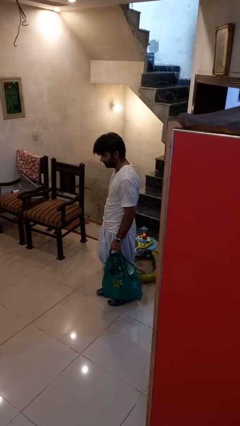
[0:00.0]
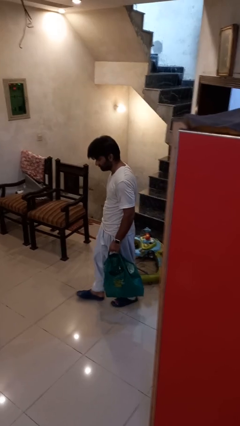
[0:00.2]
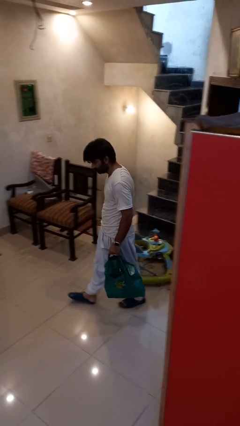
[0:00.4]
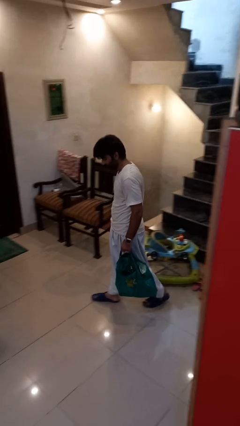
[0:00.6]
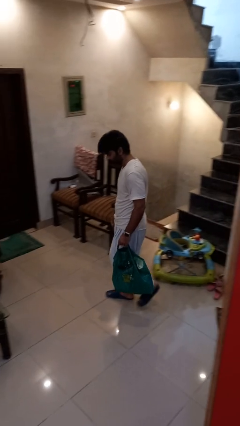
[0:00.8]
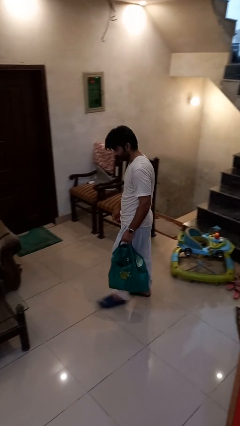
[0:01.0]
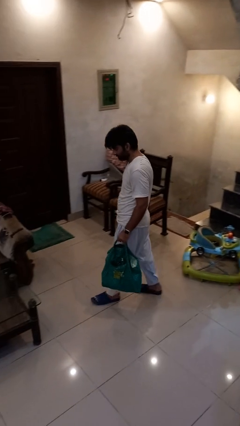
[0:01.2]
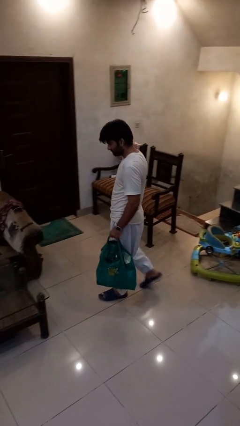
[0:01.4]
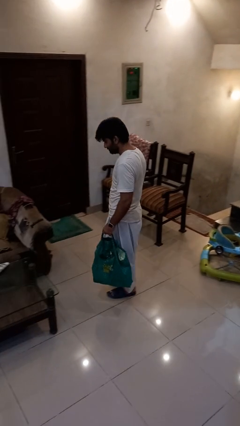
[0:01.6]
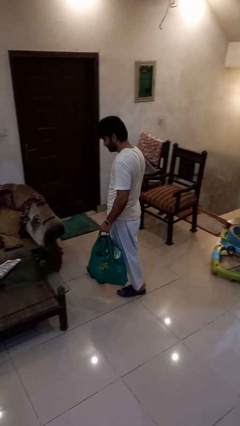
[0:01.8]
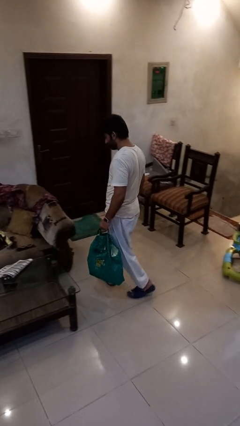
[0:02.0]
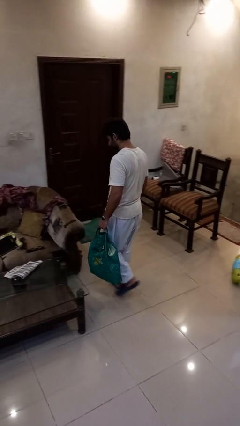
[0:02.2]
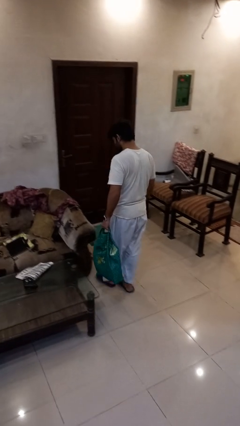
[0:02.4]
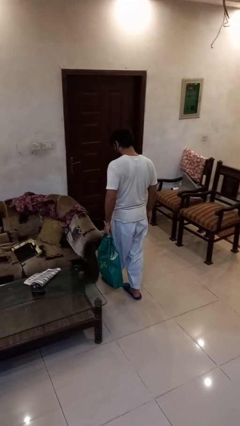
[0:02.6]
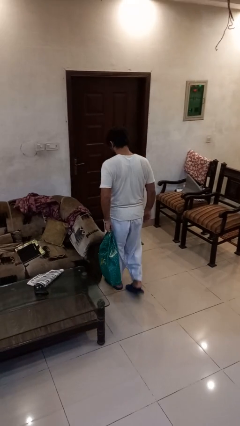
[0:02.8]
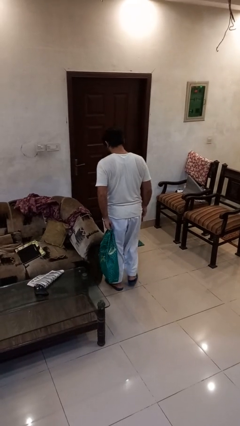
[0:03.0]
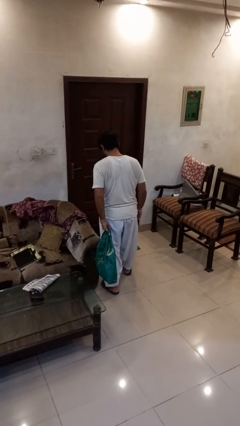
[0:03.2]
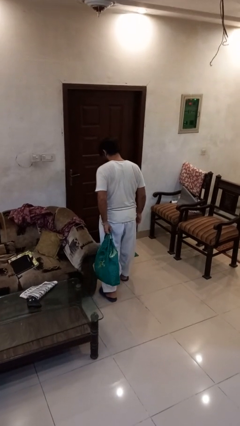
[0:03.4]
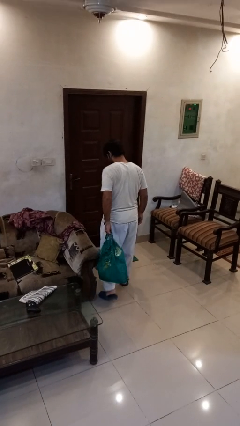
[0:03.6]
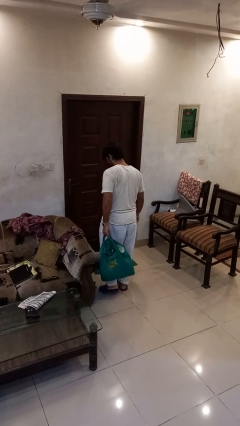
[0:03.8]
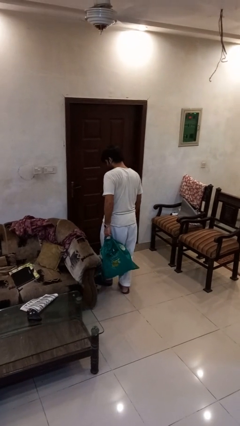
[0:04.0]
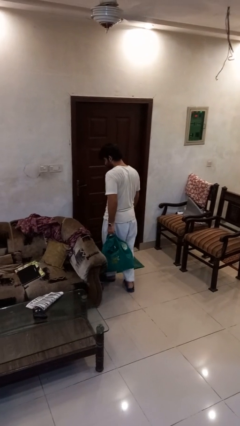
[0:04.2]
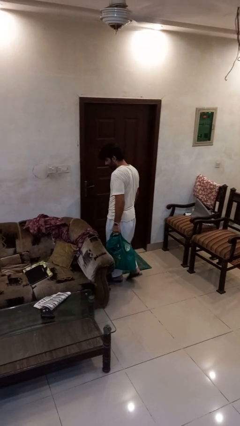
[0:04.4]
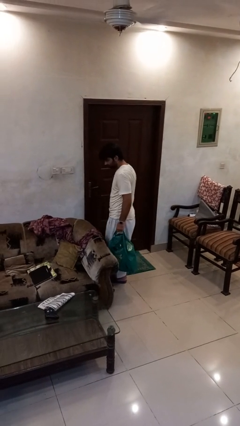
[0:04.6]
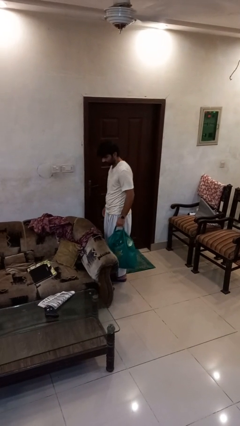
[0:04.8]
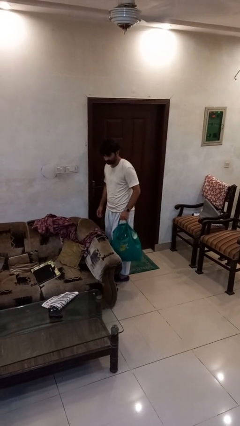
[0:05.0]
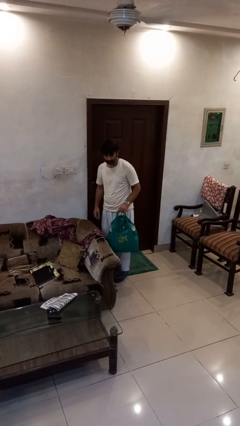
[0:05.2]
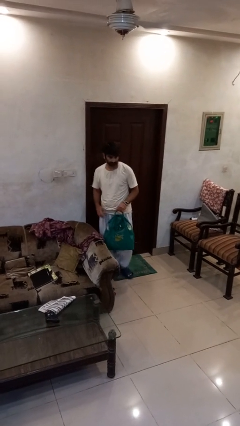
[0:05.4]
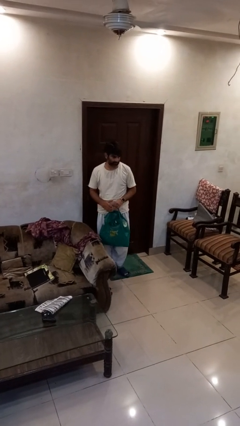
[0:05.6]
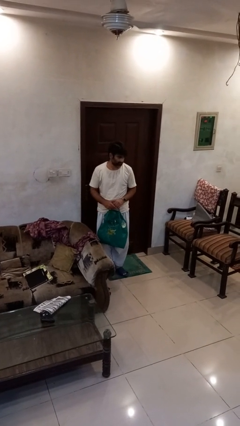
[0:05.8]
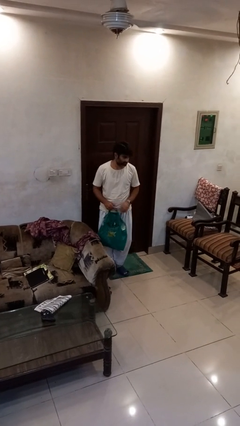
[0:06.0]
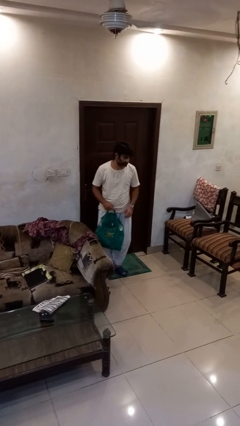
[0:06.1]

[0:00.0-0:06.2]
person carries groceries

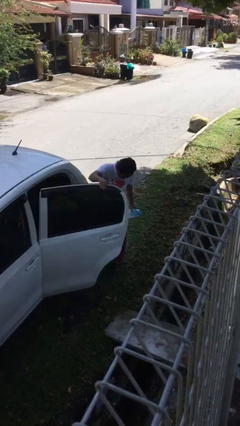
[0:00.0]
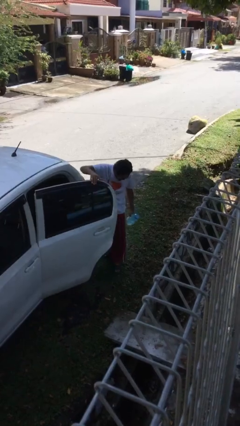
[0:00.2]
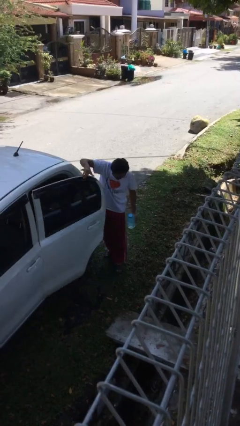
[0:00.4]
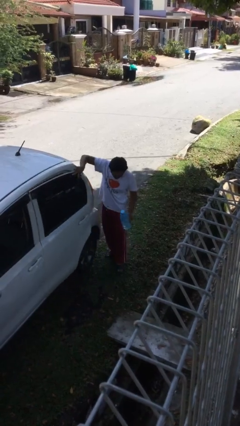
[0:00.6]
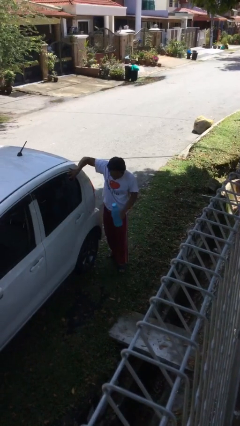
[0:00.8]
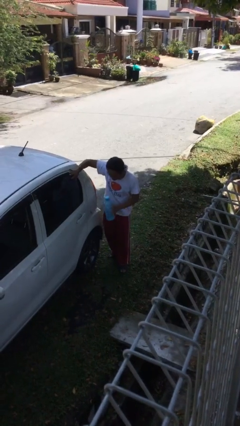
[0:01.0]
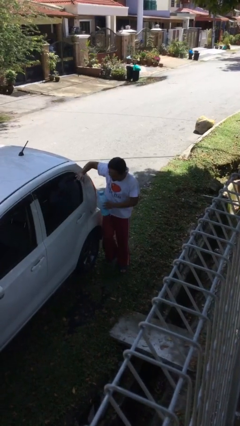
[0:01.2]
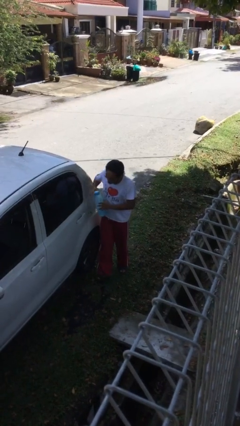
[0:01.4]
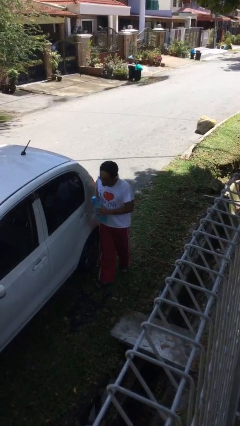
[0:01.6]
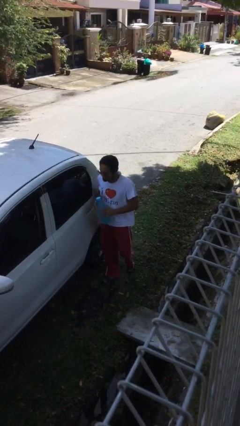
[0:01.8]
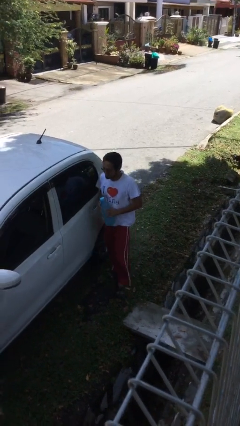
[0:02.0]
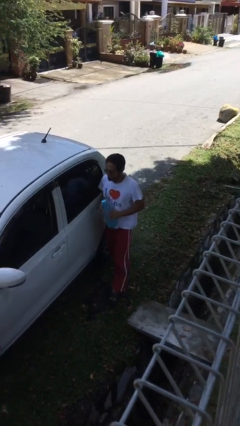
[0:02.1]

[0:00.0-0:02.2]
person closes car door

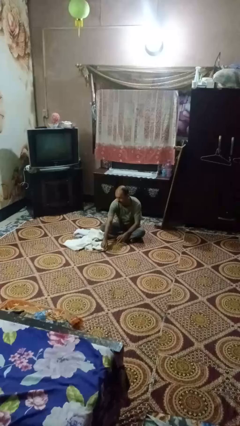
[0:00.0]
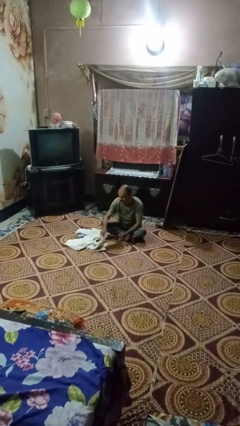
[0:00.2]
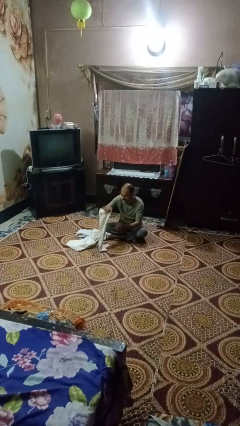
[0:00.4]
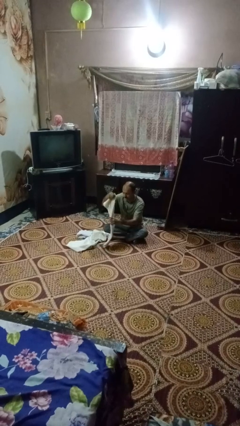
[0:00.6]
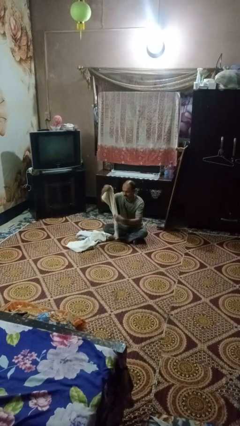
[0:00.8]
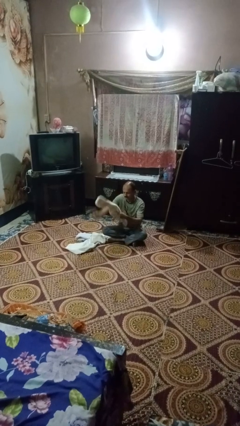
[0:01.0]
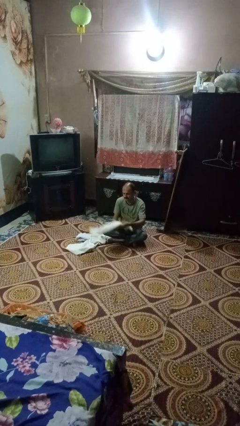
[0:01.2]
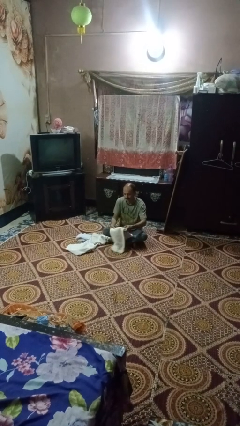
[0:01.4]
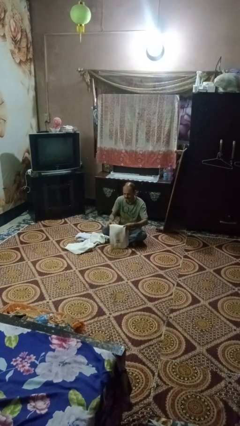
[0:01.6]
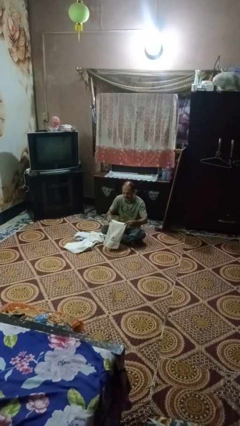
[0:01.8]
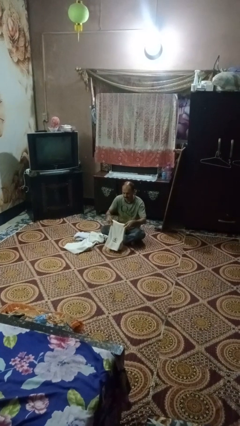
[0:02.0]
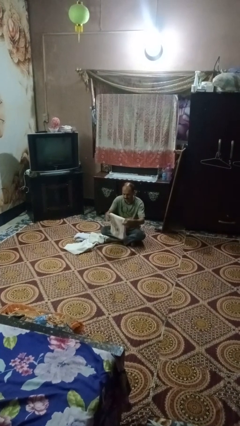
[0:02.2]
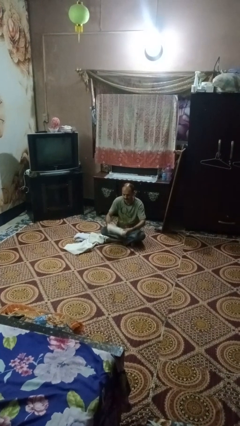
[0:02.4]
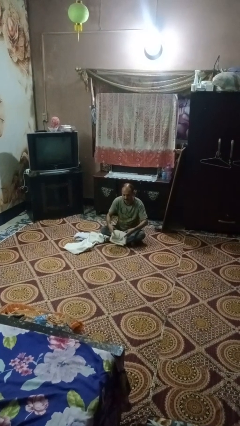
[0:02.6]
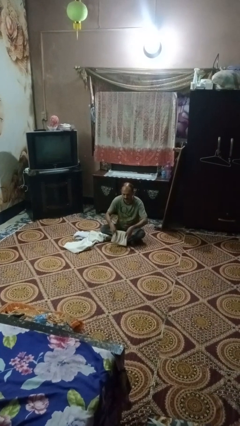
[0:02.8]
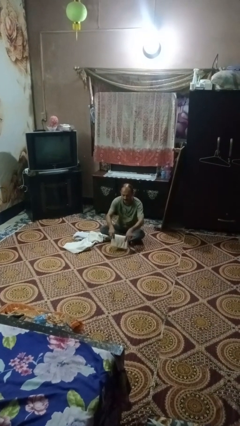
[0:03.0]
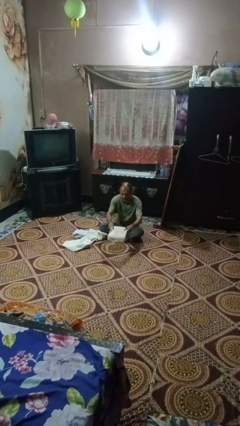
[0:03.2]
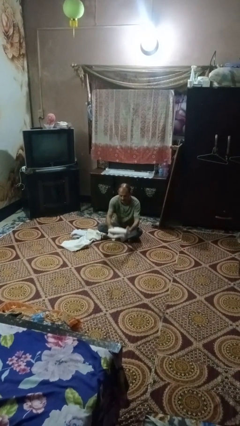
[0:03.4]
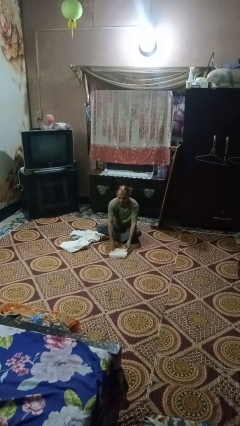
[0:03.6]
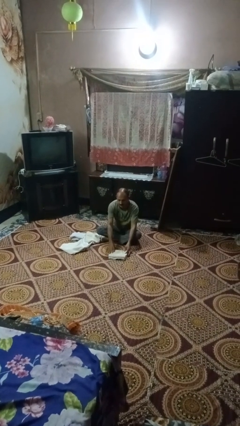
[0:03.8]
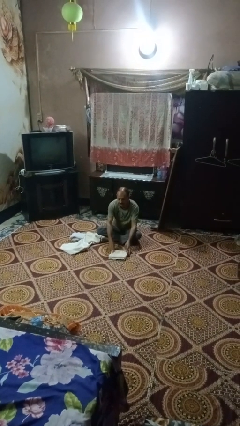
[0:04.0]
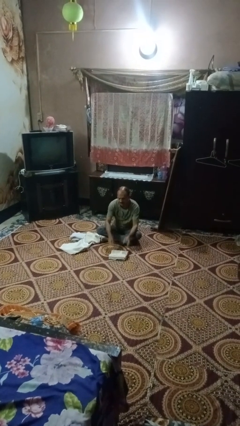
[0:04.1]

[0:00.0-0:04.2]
person folds towel

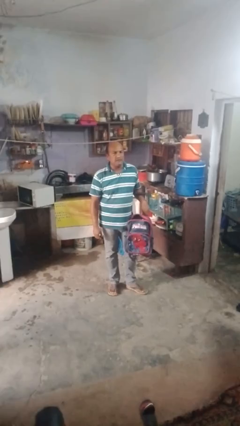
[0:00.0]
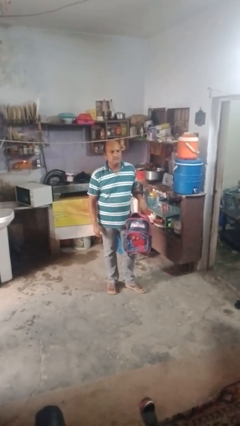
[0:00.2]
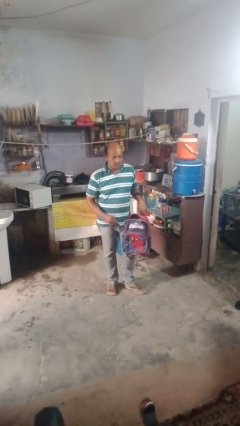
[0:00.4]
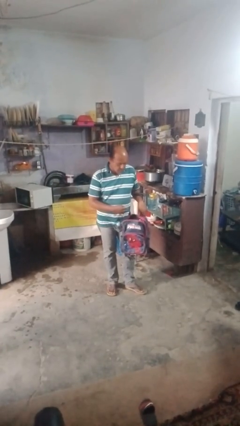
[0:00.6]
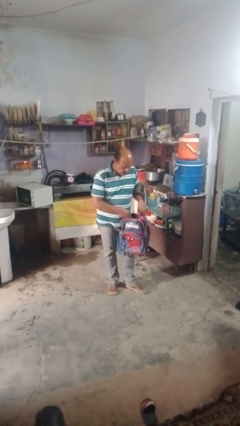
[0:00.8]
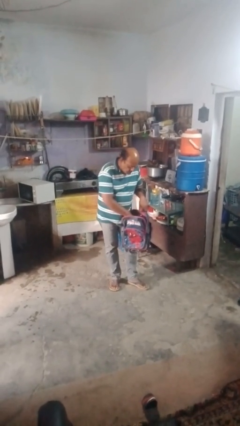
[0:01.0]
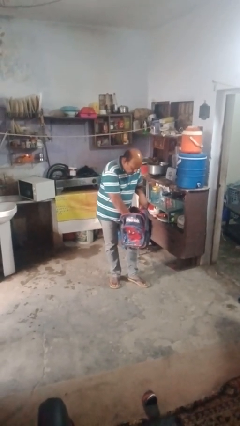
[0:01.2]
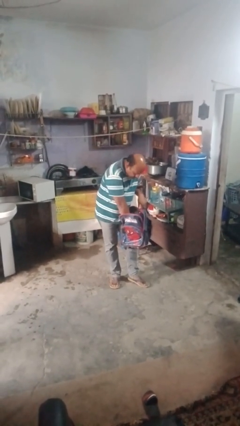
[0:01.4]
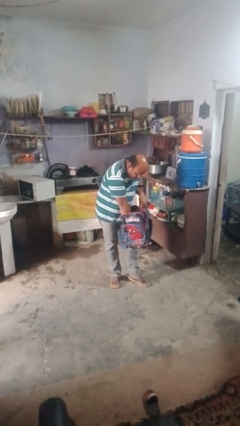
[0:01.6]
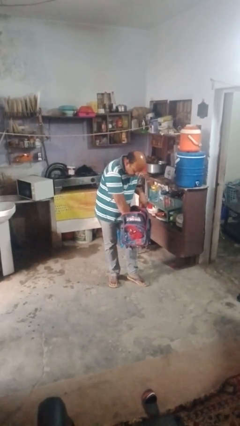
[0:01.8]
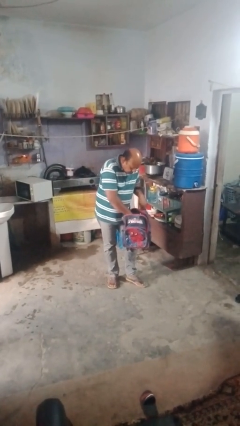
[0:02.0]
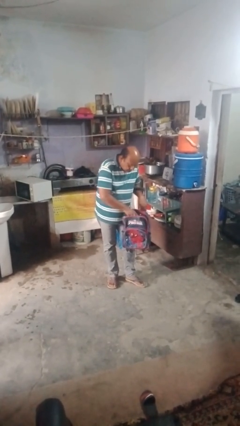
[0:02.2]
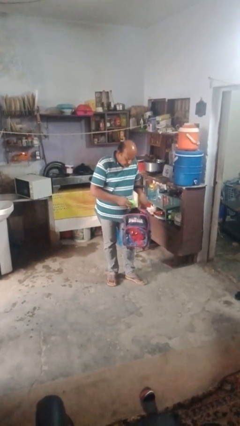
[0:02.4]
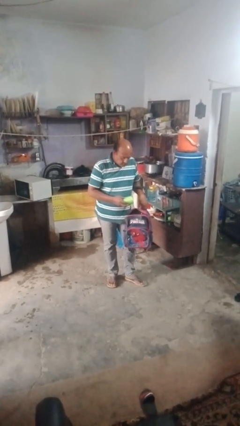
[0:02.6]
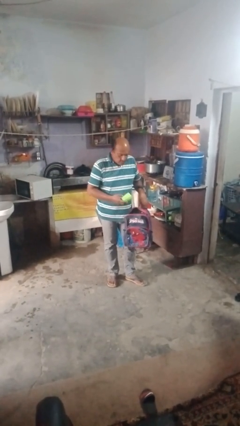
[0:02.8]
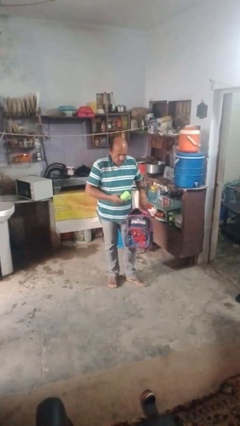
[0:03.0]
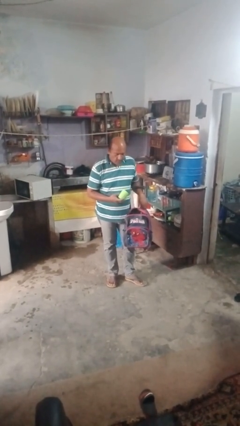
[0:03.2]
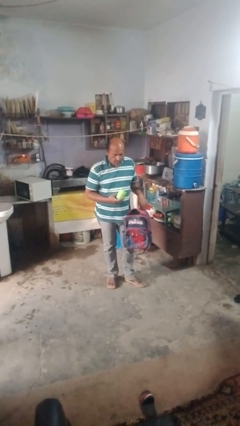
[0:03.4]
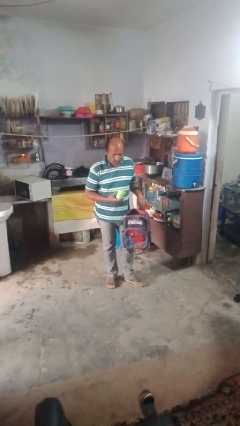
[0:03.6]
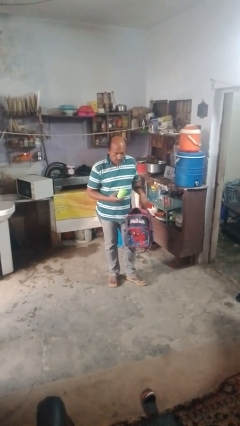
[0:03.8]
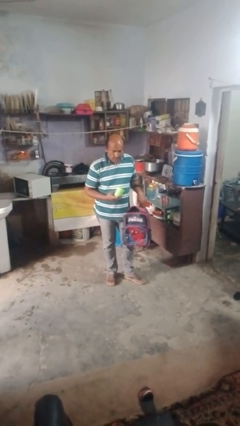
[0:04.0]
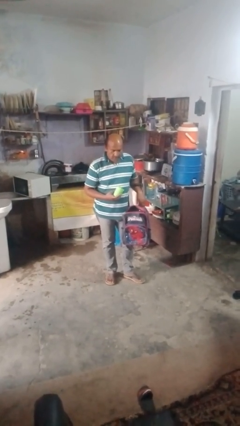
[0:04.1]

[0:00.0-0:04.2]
person takes object from bag

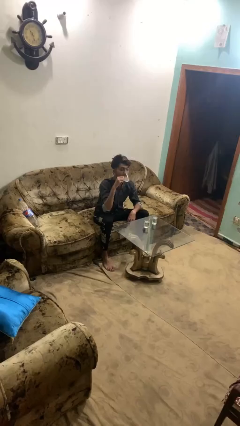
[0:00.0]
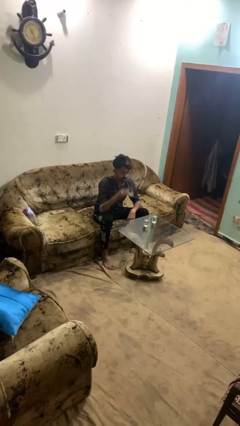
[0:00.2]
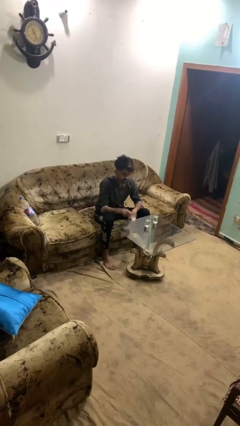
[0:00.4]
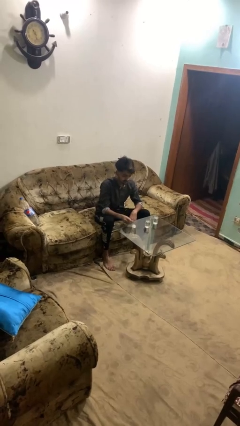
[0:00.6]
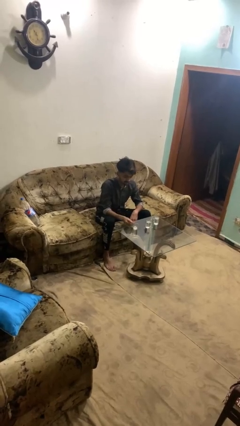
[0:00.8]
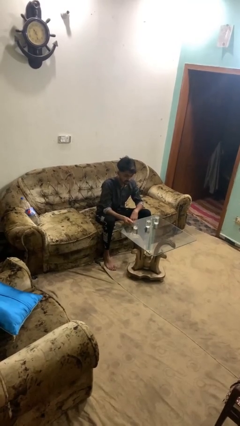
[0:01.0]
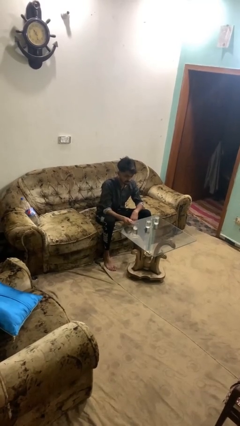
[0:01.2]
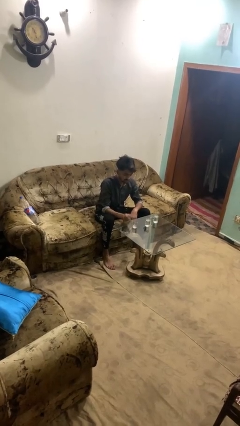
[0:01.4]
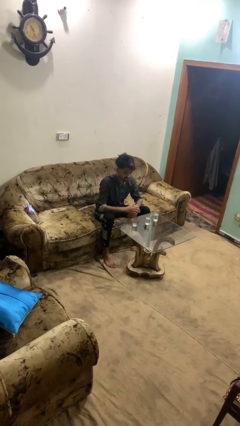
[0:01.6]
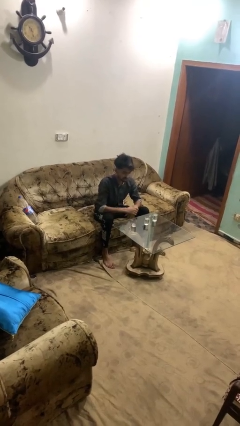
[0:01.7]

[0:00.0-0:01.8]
person puts down object on table
